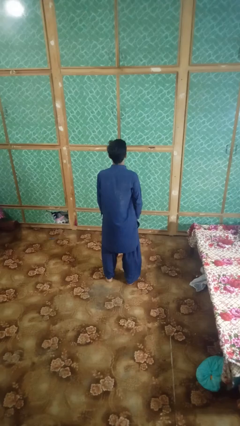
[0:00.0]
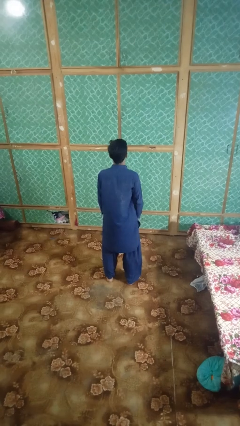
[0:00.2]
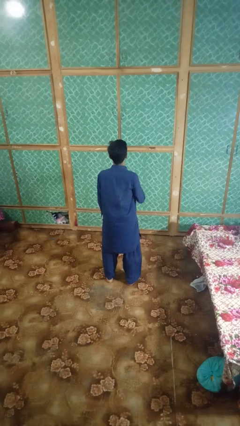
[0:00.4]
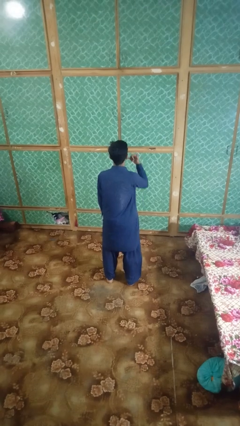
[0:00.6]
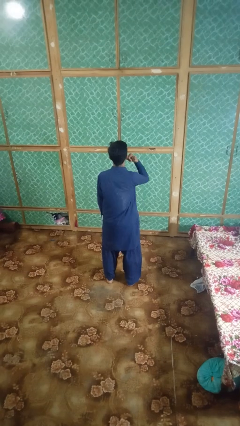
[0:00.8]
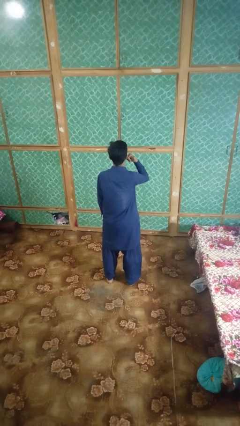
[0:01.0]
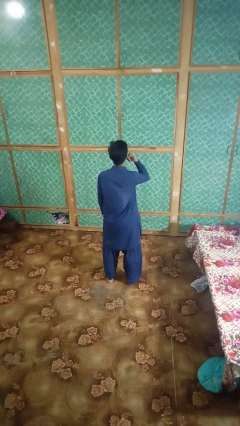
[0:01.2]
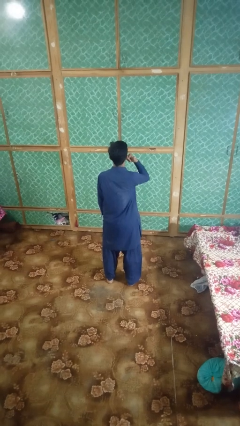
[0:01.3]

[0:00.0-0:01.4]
person gestures call me

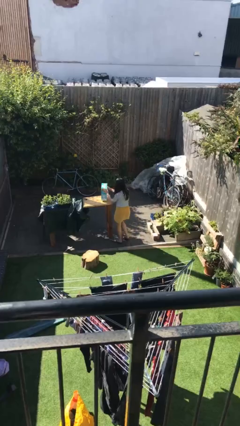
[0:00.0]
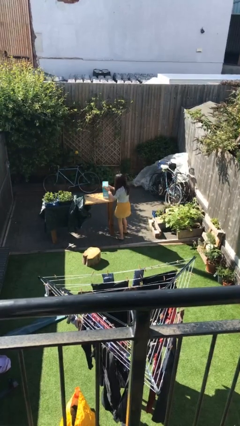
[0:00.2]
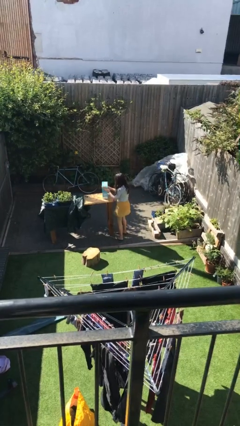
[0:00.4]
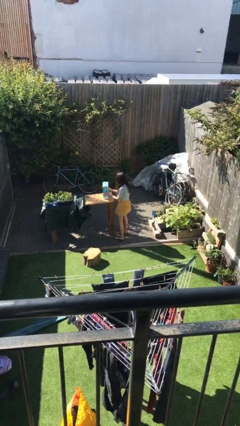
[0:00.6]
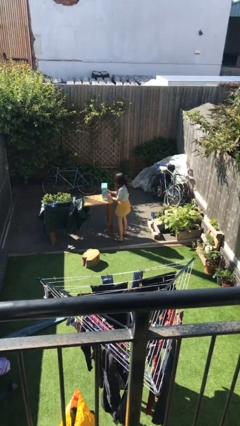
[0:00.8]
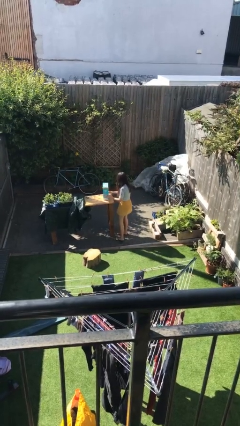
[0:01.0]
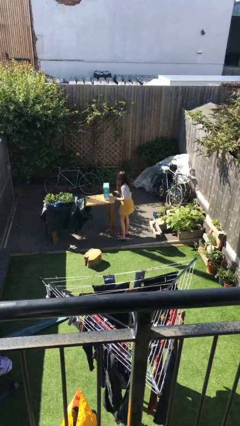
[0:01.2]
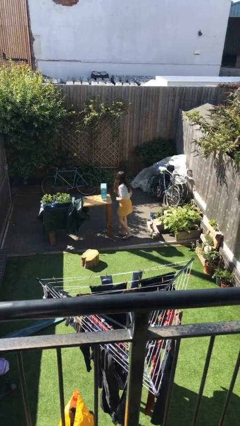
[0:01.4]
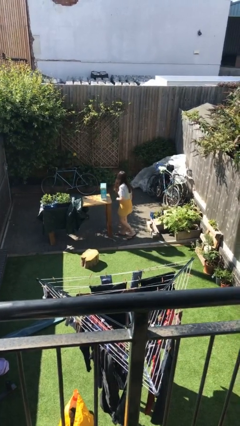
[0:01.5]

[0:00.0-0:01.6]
person puts down object on table

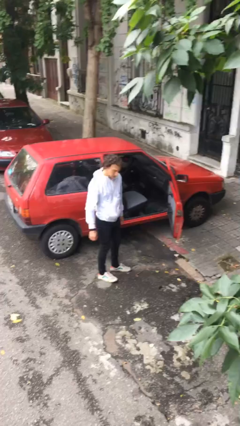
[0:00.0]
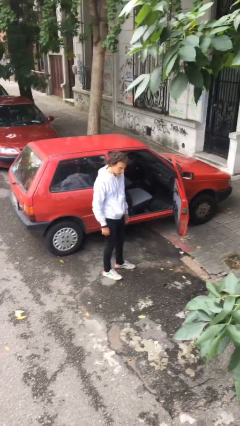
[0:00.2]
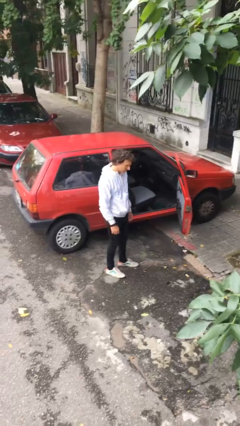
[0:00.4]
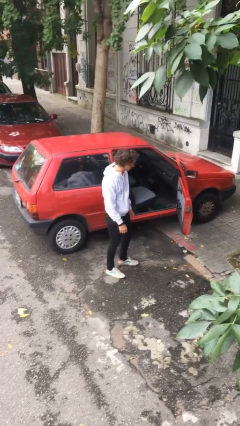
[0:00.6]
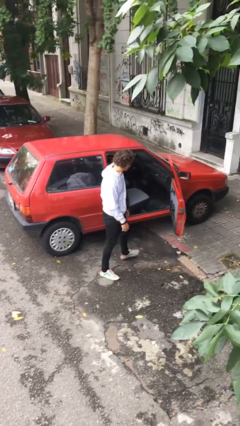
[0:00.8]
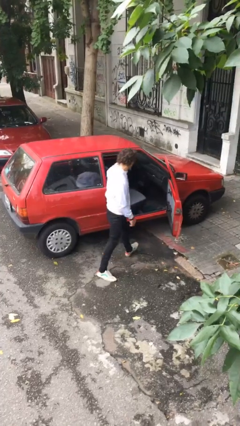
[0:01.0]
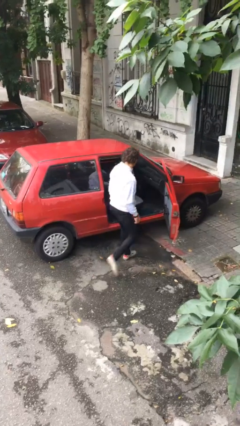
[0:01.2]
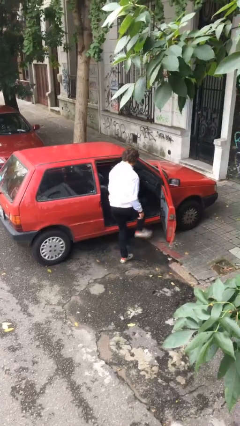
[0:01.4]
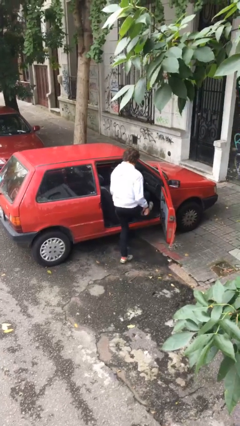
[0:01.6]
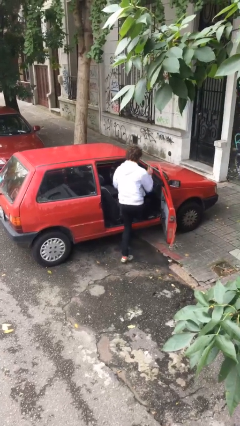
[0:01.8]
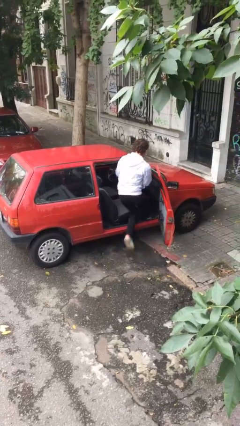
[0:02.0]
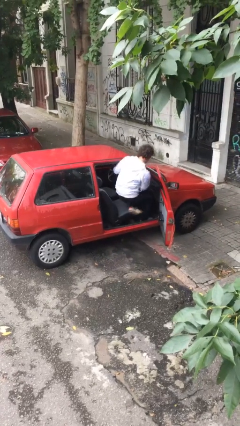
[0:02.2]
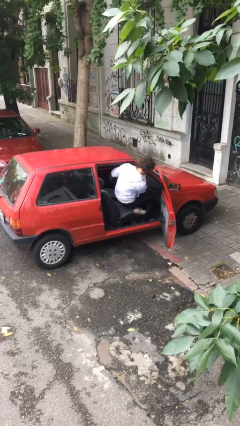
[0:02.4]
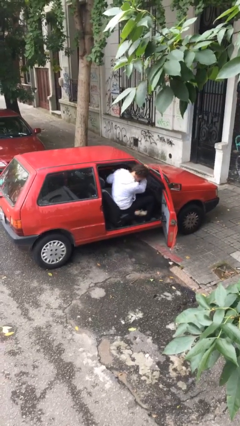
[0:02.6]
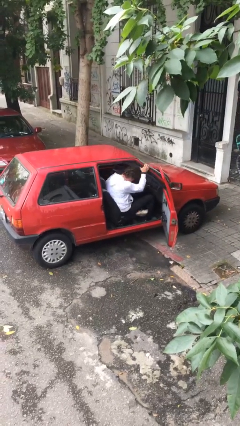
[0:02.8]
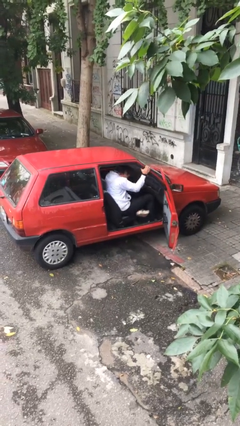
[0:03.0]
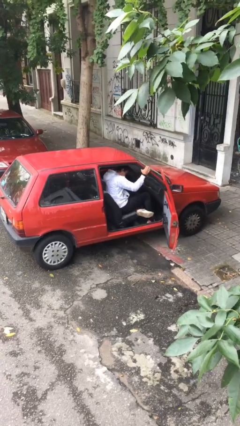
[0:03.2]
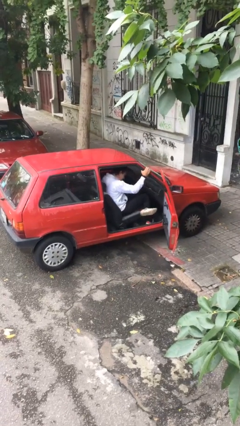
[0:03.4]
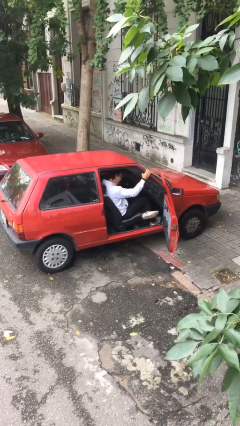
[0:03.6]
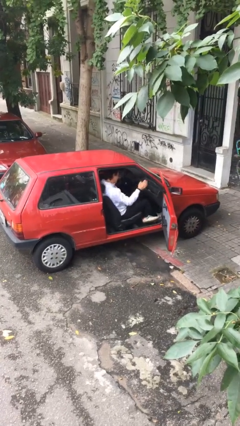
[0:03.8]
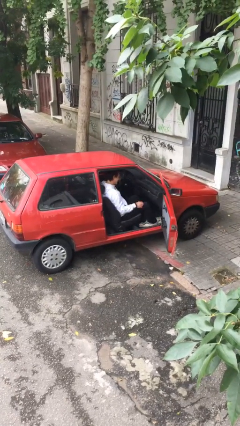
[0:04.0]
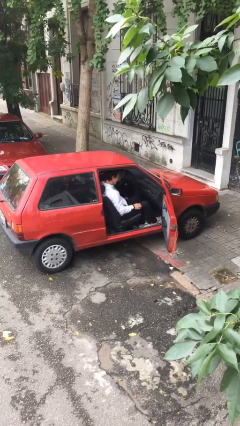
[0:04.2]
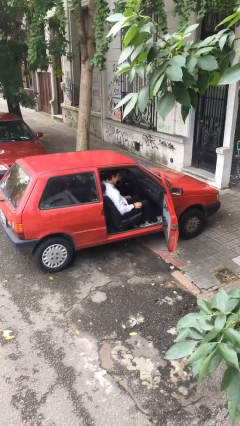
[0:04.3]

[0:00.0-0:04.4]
person enters car

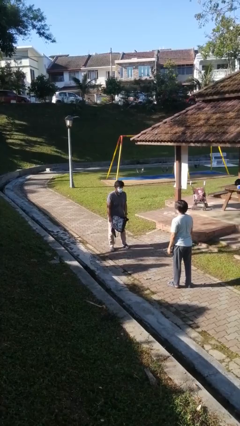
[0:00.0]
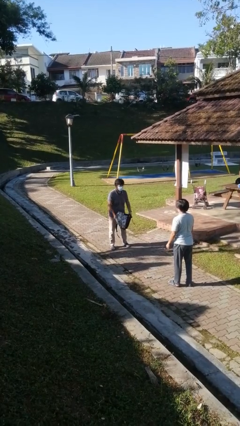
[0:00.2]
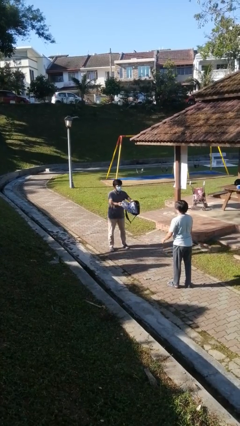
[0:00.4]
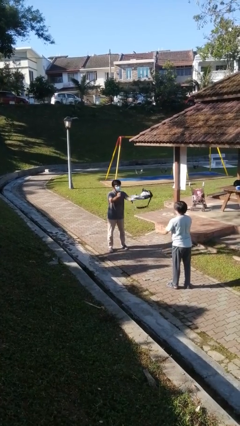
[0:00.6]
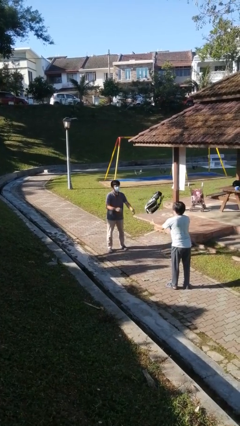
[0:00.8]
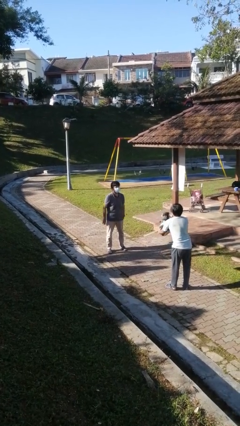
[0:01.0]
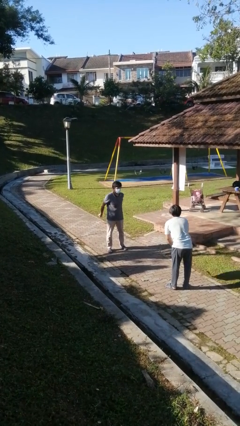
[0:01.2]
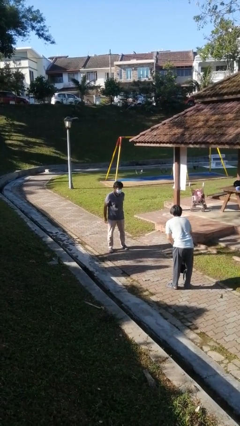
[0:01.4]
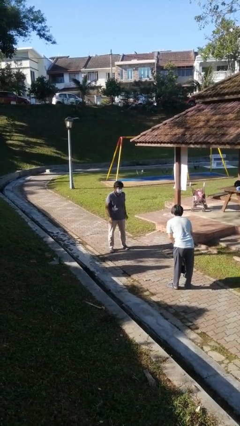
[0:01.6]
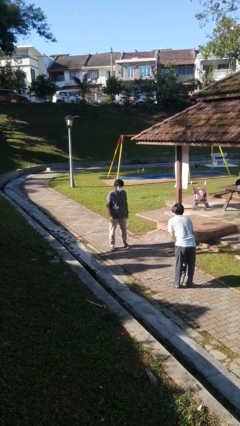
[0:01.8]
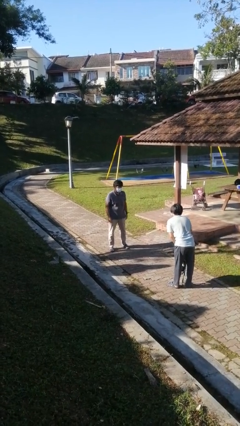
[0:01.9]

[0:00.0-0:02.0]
person throws object to person

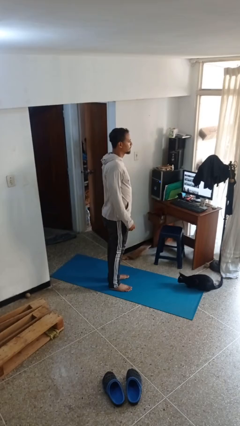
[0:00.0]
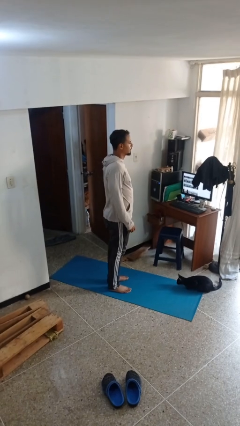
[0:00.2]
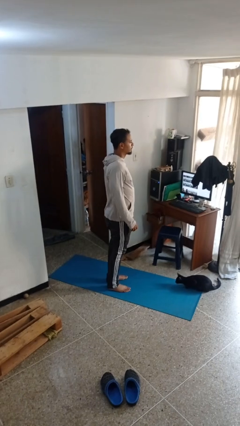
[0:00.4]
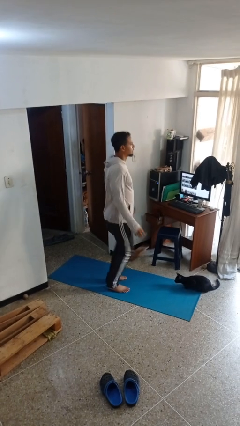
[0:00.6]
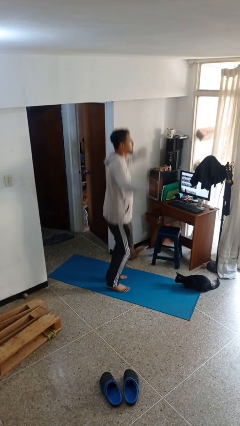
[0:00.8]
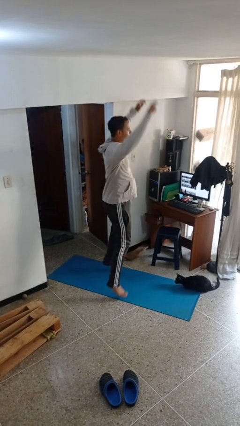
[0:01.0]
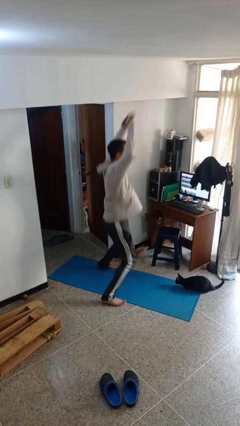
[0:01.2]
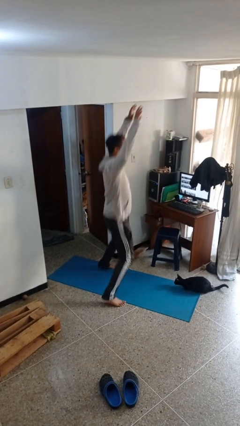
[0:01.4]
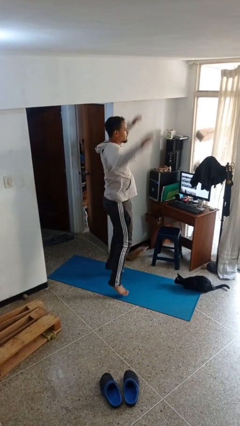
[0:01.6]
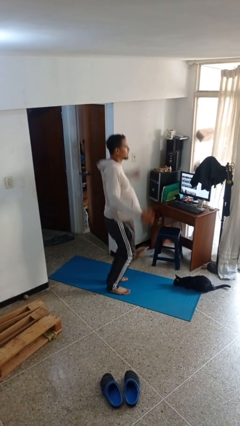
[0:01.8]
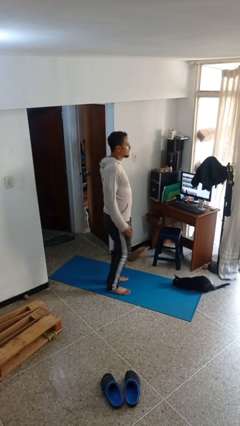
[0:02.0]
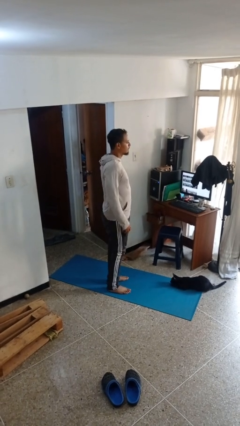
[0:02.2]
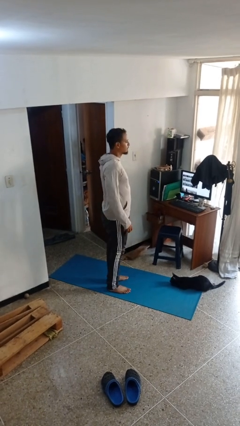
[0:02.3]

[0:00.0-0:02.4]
person exercises with jumping jacks

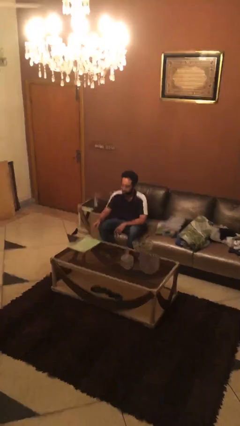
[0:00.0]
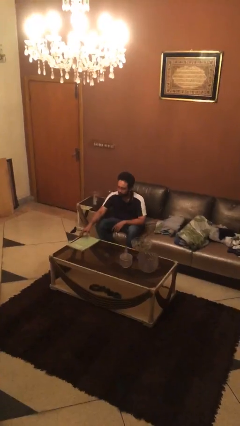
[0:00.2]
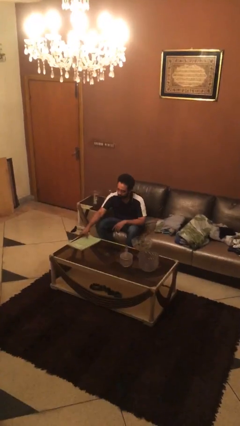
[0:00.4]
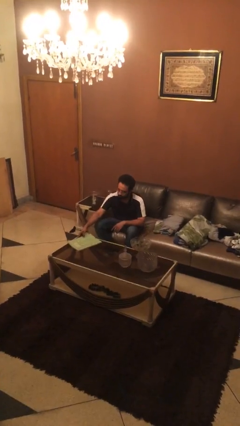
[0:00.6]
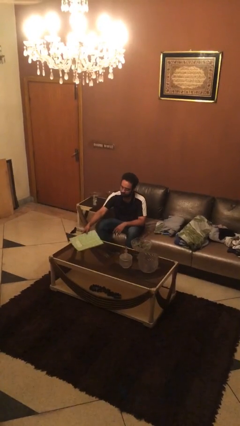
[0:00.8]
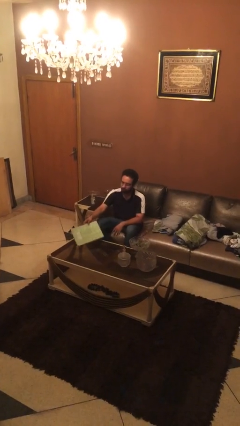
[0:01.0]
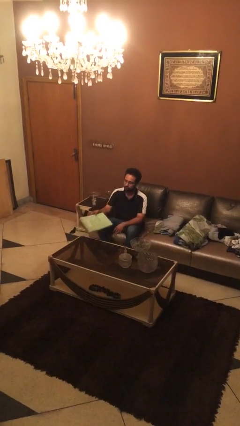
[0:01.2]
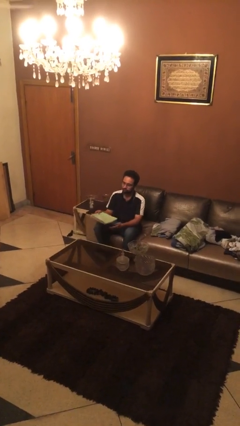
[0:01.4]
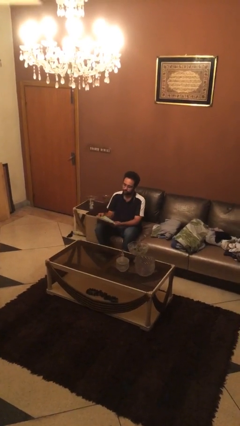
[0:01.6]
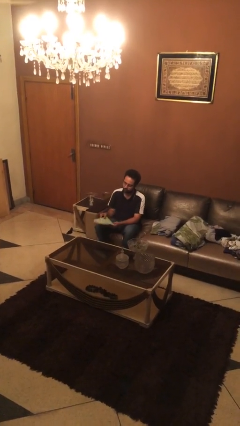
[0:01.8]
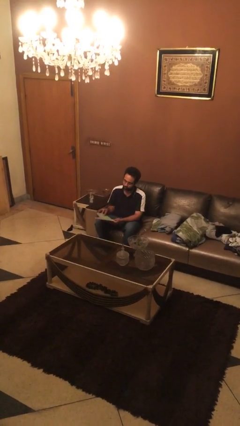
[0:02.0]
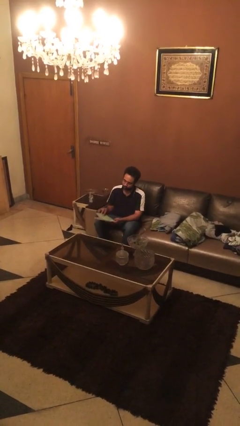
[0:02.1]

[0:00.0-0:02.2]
person picks up object from table

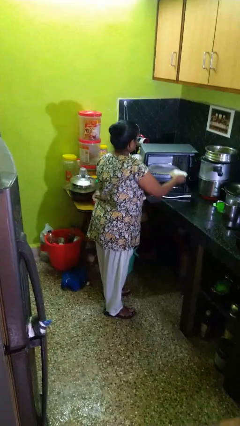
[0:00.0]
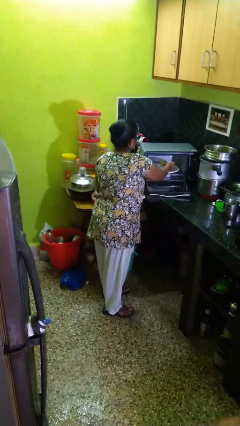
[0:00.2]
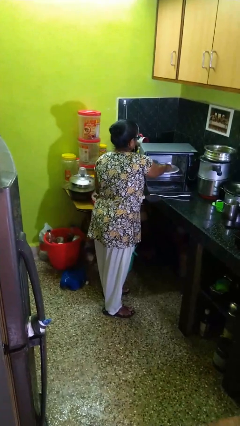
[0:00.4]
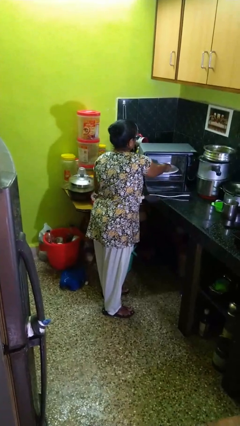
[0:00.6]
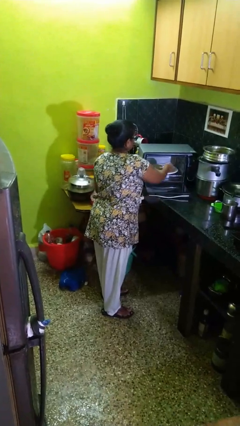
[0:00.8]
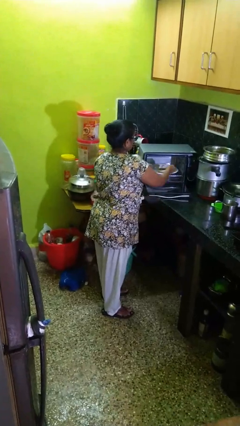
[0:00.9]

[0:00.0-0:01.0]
person puts object into microwave

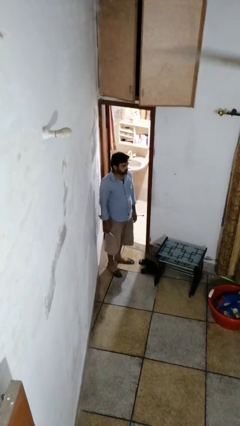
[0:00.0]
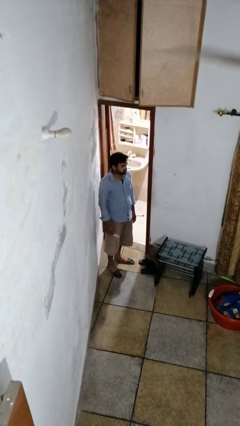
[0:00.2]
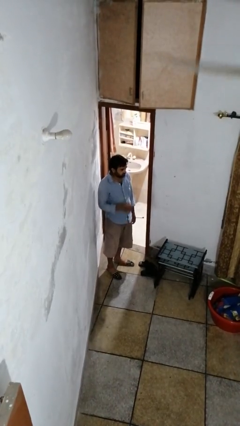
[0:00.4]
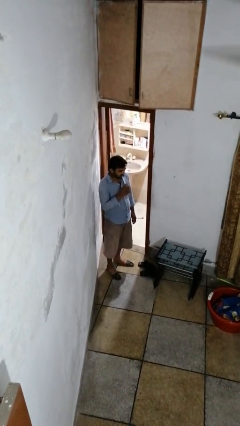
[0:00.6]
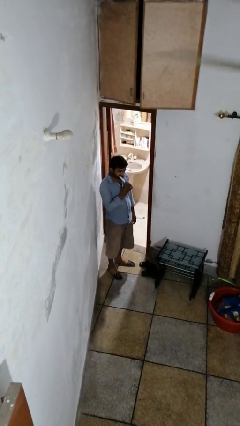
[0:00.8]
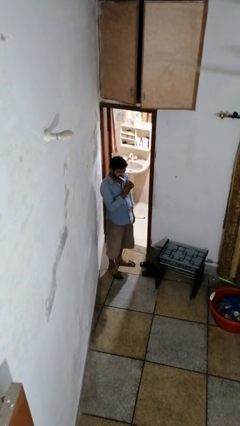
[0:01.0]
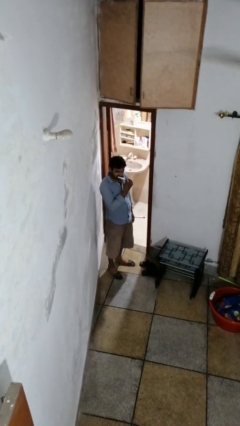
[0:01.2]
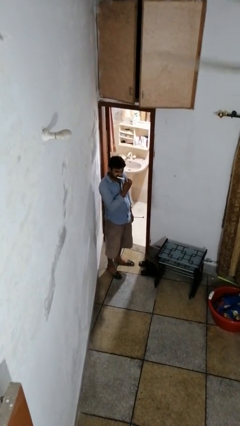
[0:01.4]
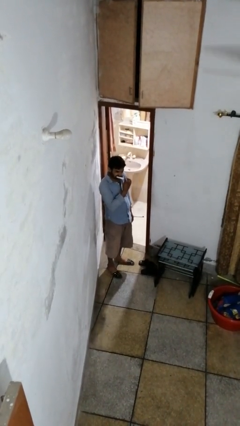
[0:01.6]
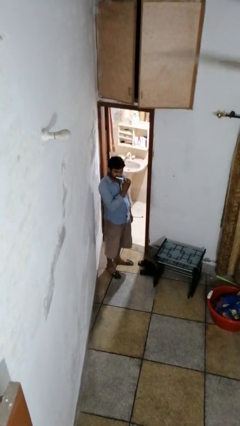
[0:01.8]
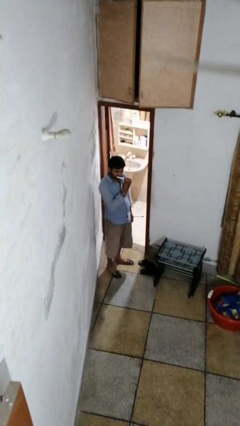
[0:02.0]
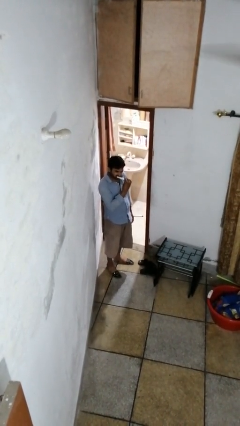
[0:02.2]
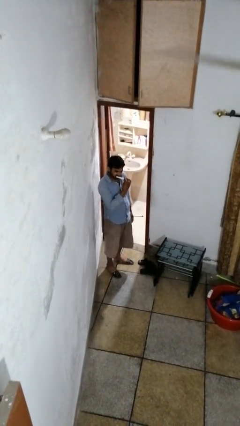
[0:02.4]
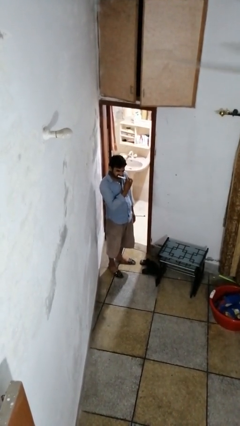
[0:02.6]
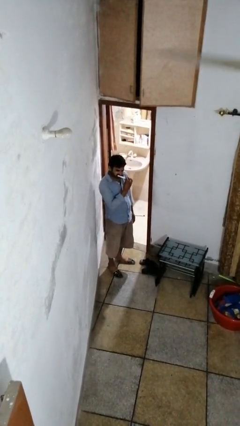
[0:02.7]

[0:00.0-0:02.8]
person brushes teeth
